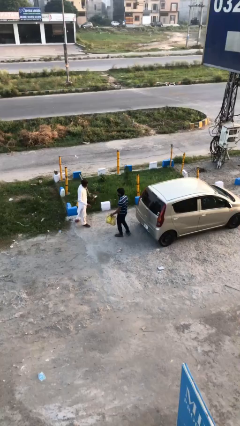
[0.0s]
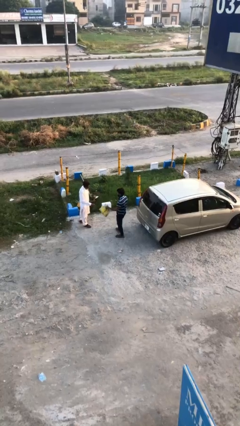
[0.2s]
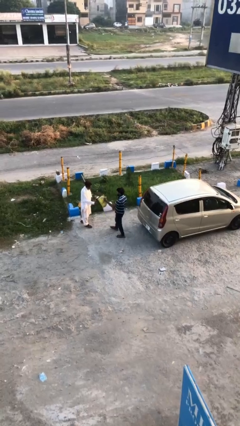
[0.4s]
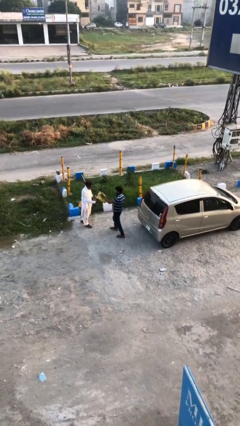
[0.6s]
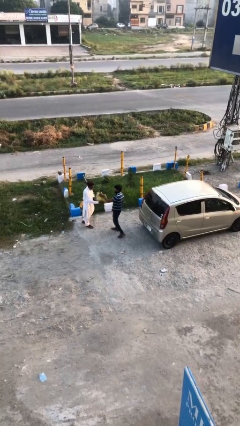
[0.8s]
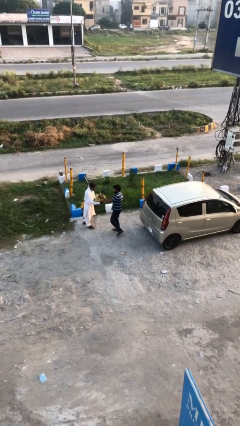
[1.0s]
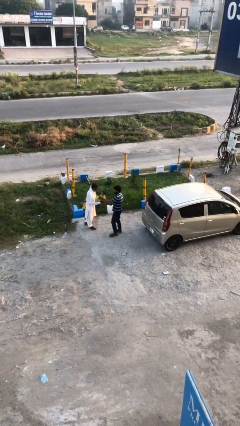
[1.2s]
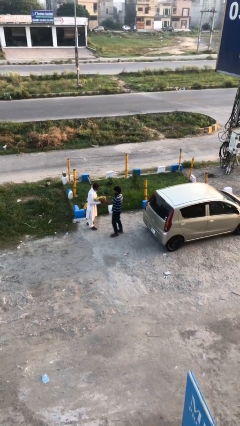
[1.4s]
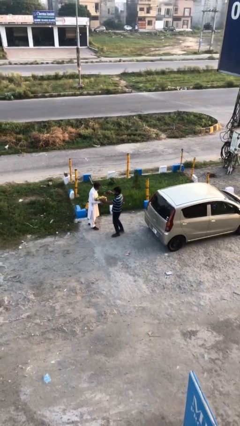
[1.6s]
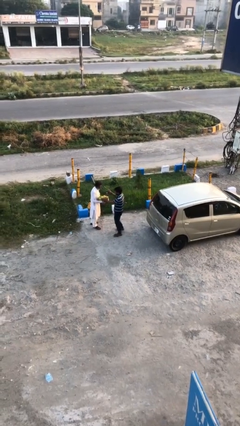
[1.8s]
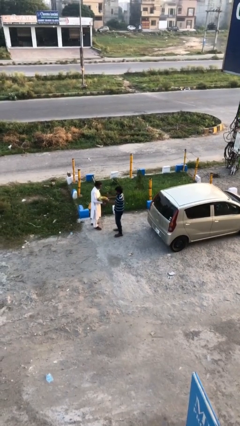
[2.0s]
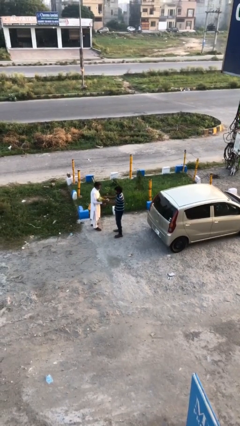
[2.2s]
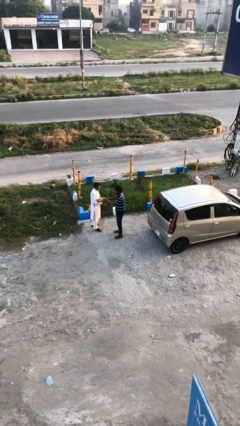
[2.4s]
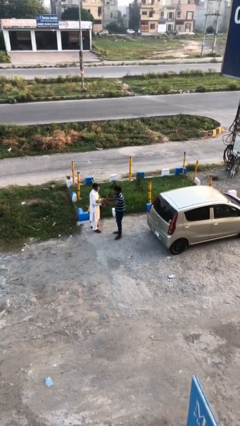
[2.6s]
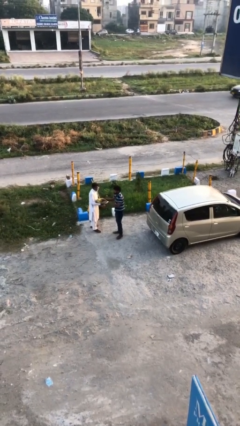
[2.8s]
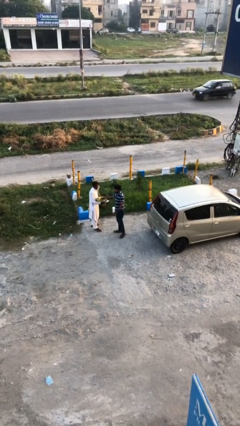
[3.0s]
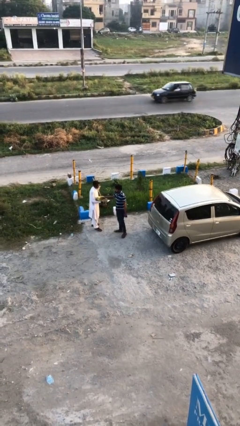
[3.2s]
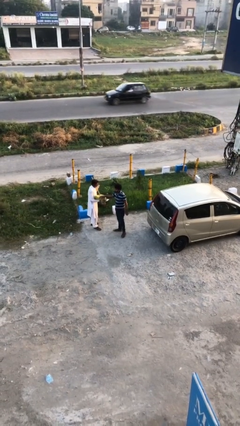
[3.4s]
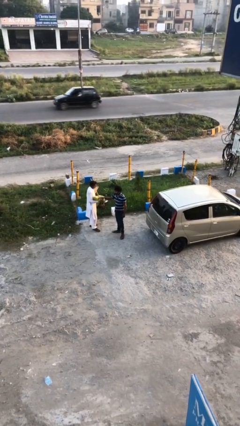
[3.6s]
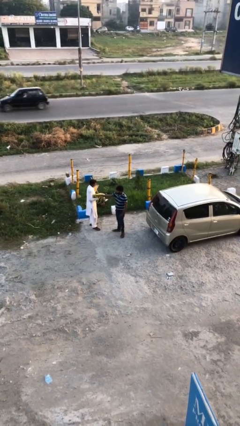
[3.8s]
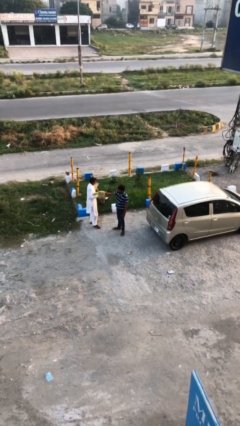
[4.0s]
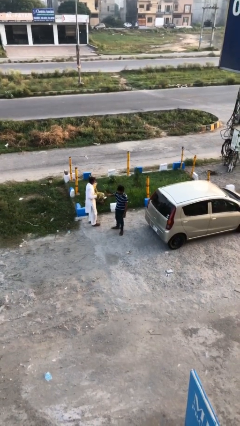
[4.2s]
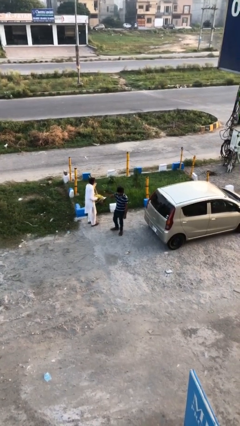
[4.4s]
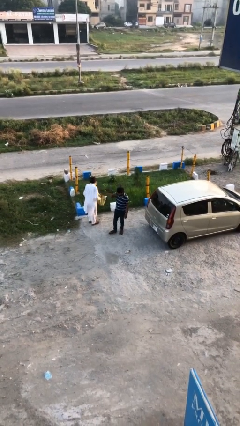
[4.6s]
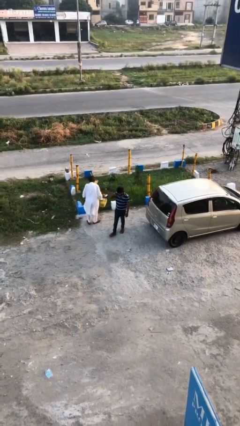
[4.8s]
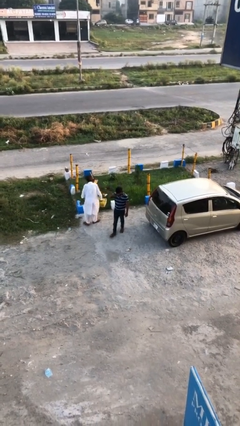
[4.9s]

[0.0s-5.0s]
person transfers object to person

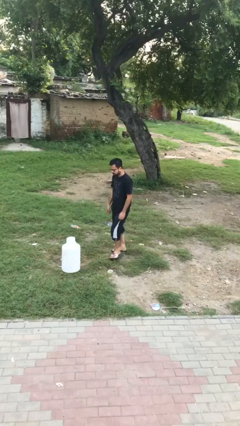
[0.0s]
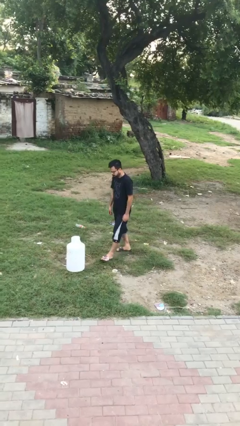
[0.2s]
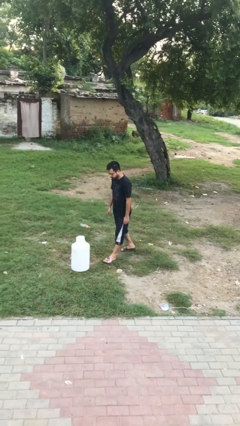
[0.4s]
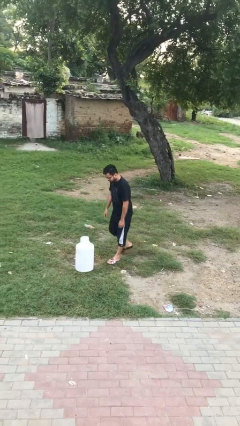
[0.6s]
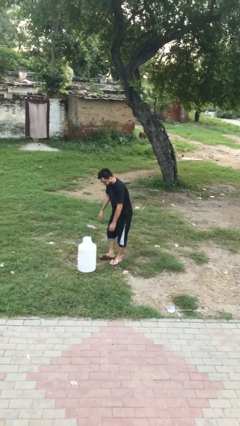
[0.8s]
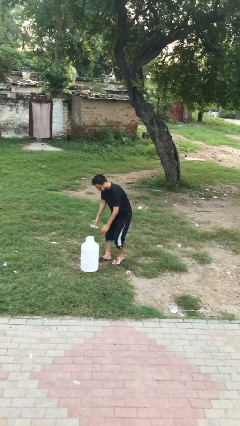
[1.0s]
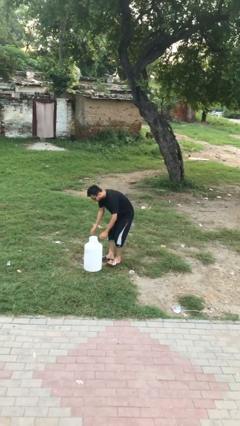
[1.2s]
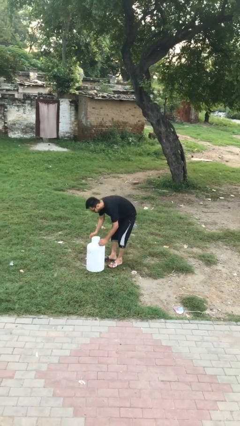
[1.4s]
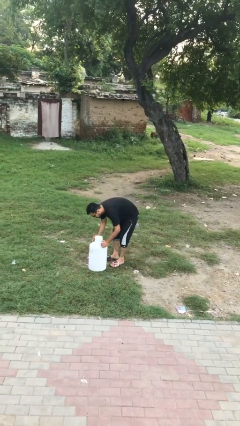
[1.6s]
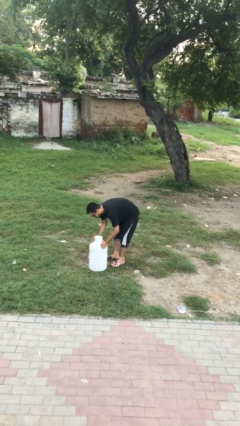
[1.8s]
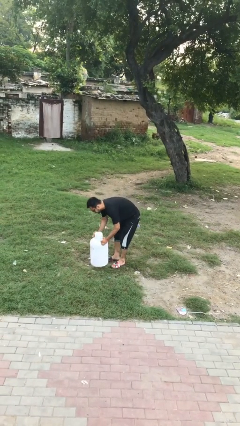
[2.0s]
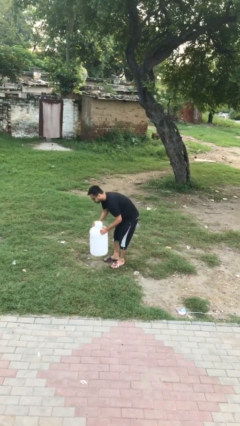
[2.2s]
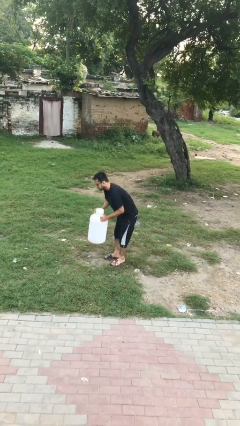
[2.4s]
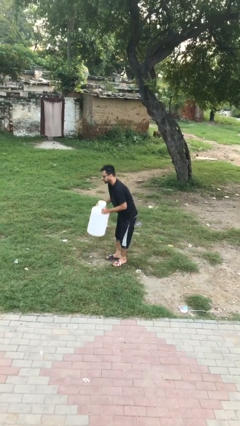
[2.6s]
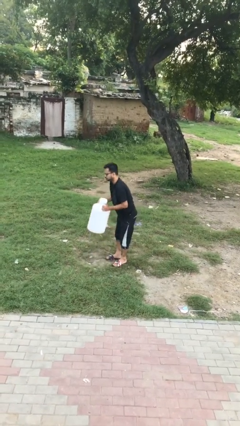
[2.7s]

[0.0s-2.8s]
person picks up object from floor

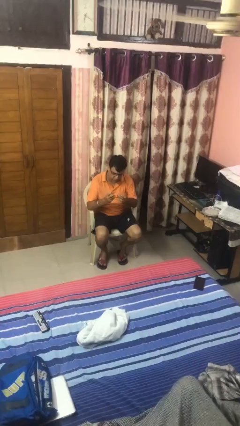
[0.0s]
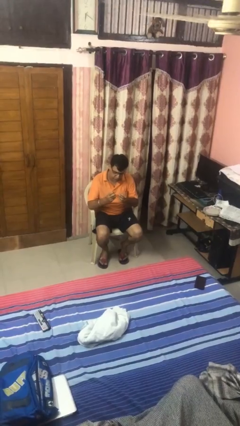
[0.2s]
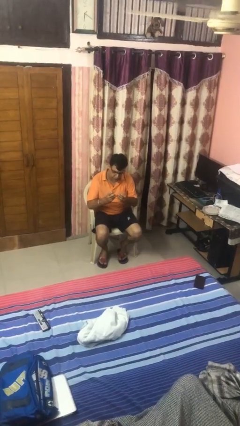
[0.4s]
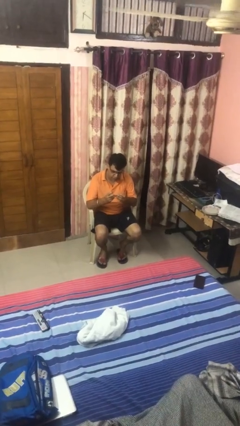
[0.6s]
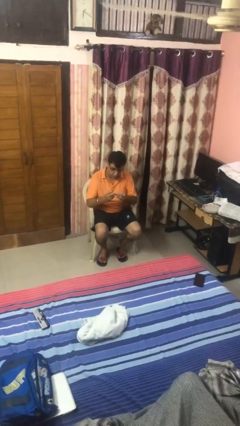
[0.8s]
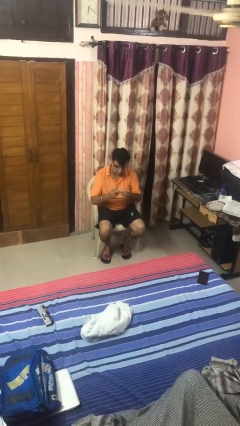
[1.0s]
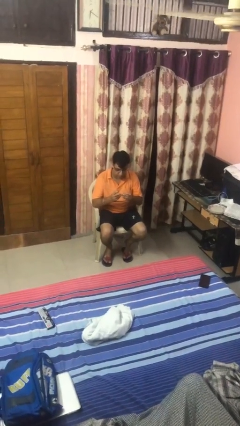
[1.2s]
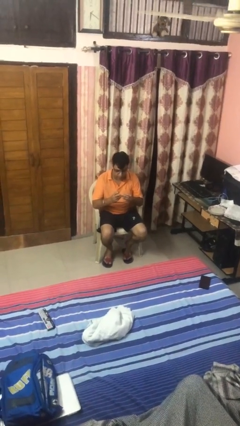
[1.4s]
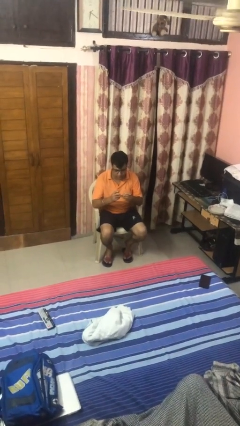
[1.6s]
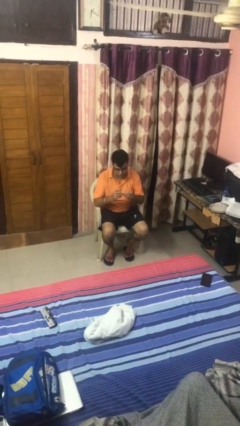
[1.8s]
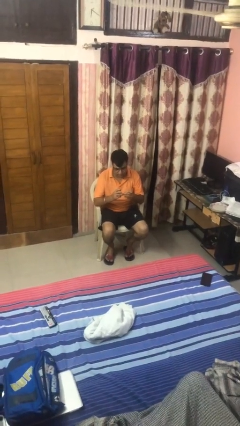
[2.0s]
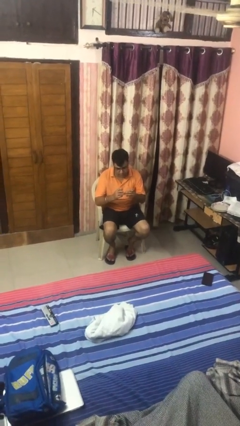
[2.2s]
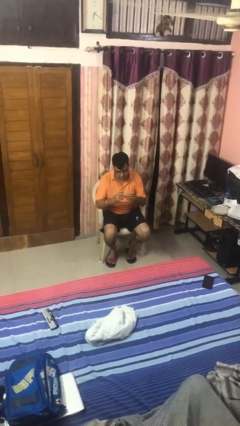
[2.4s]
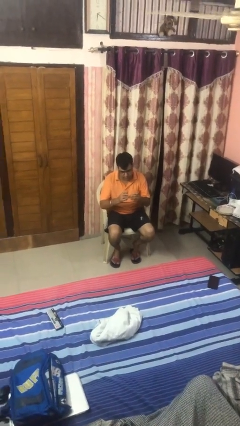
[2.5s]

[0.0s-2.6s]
person clips fingernails

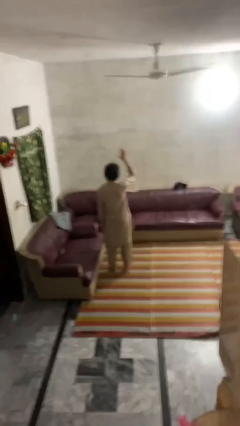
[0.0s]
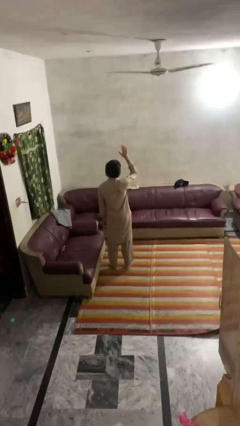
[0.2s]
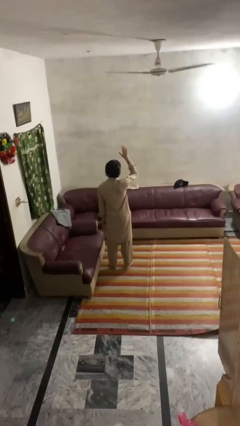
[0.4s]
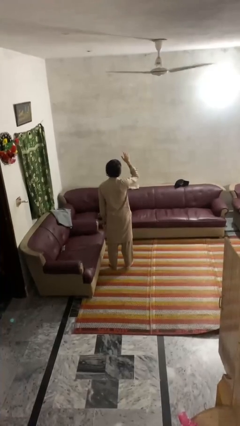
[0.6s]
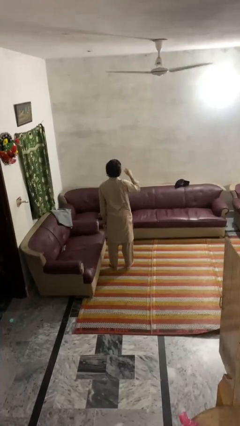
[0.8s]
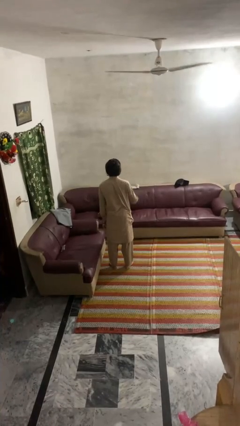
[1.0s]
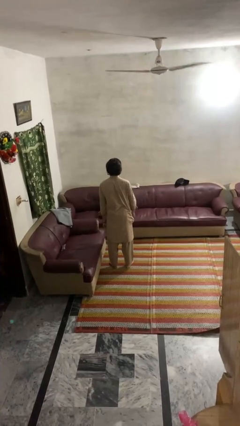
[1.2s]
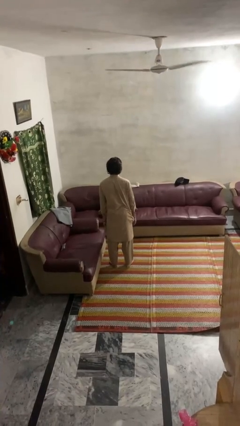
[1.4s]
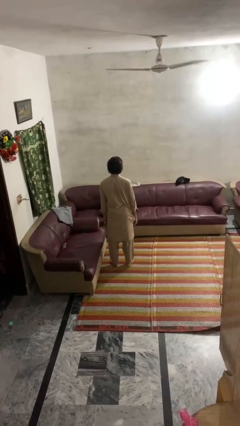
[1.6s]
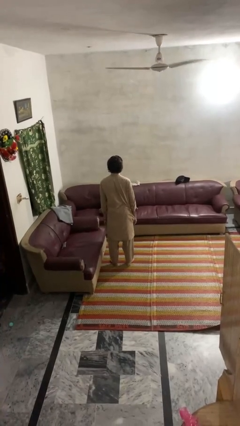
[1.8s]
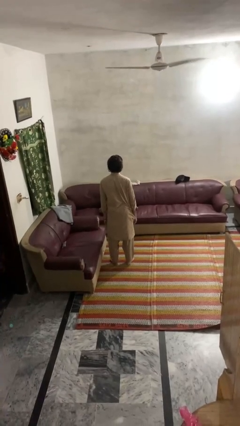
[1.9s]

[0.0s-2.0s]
person gestures lower hand

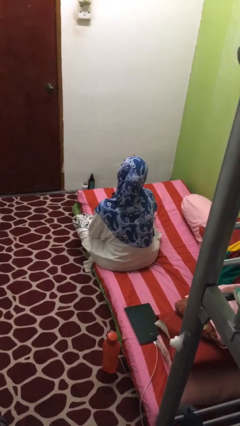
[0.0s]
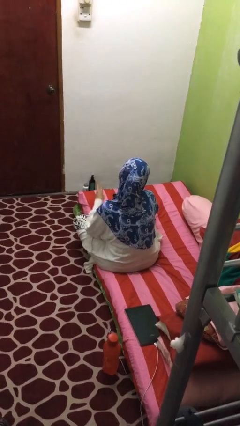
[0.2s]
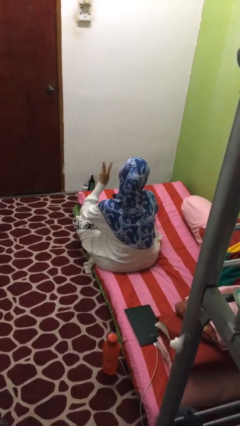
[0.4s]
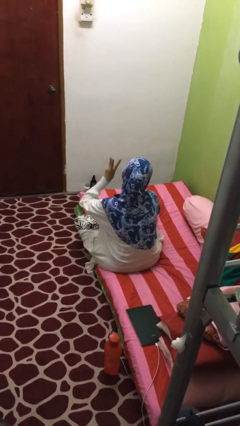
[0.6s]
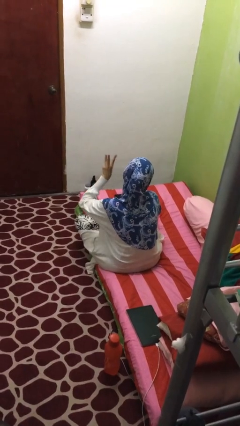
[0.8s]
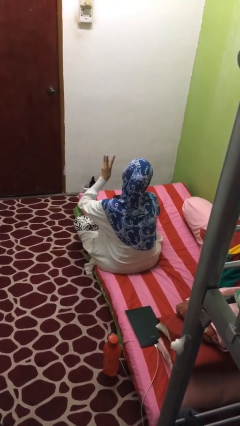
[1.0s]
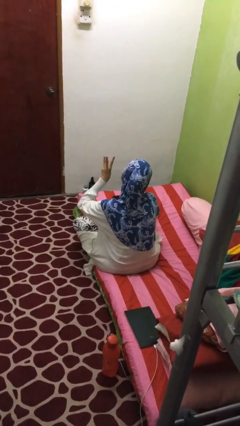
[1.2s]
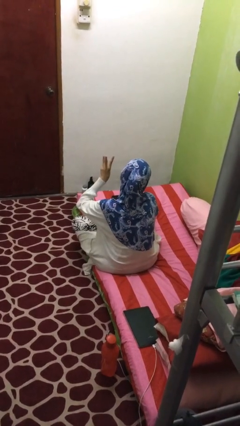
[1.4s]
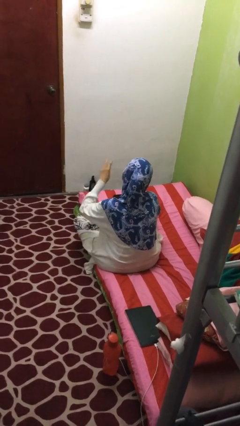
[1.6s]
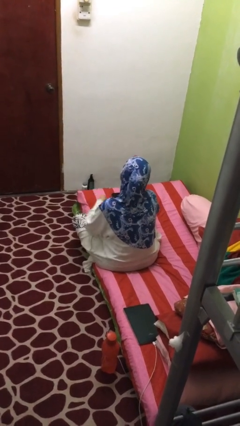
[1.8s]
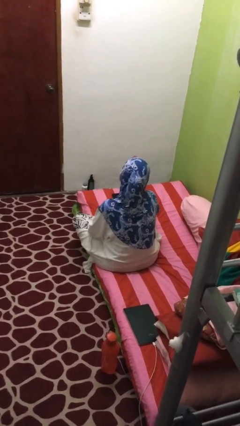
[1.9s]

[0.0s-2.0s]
person gestures number three

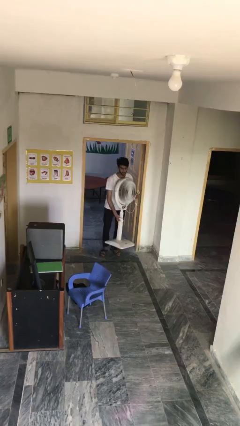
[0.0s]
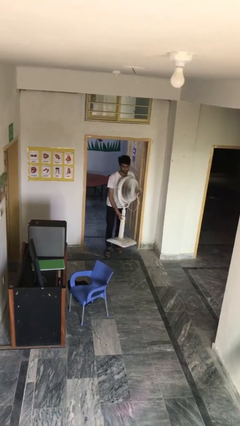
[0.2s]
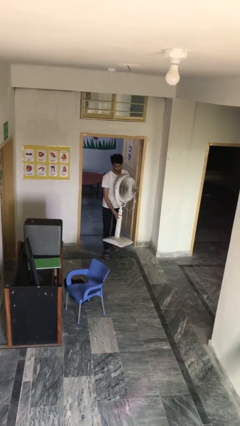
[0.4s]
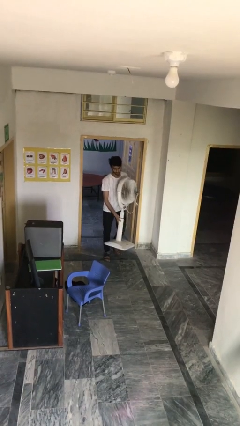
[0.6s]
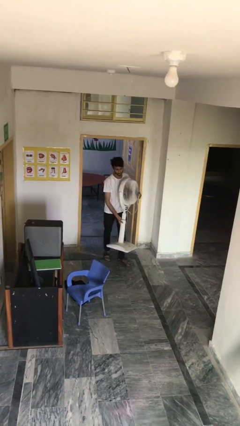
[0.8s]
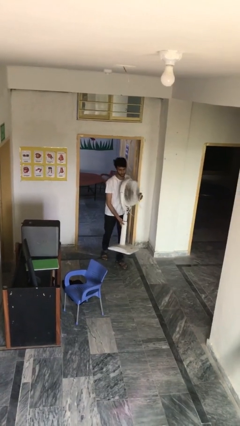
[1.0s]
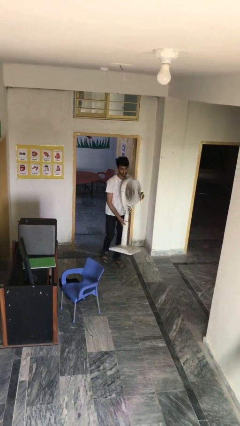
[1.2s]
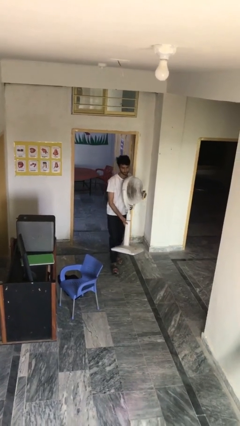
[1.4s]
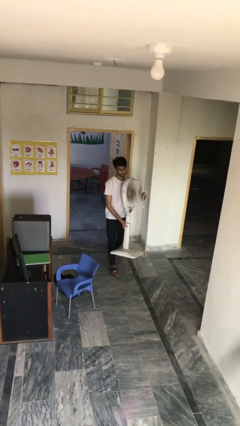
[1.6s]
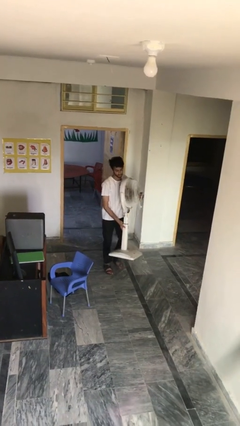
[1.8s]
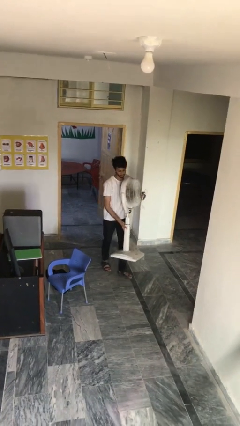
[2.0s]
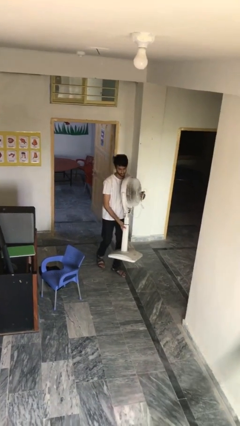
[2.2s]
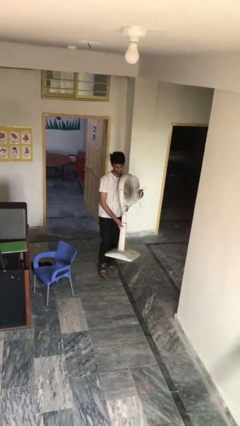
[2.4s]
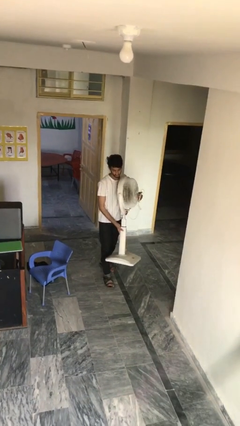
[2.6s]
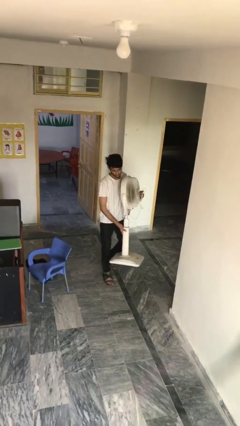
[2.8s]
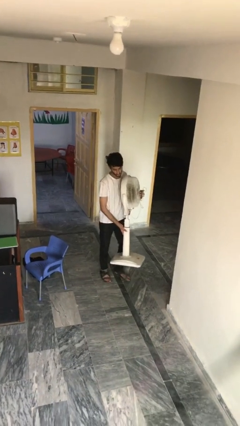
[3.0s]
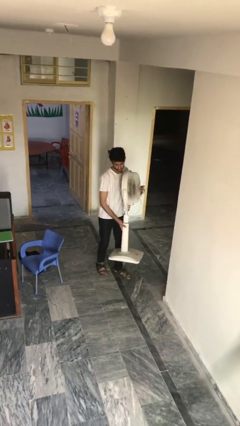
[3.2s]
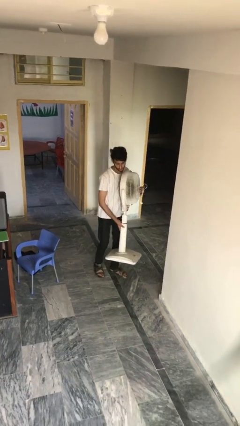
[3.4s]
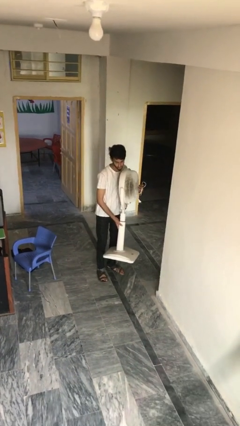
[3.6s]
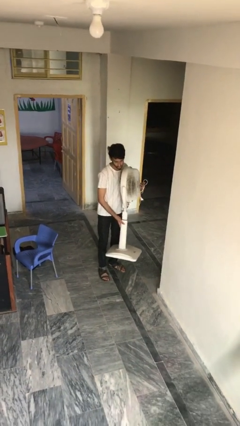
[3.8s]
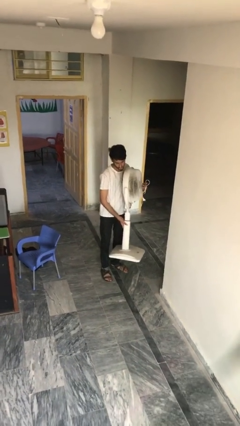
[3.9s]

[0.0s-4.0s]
person carries heavy object
